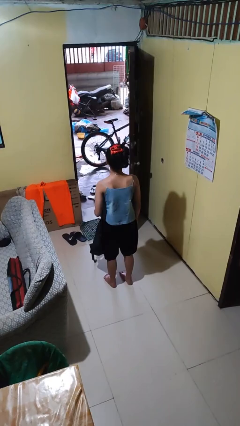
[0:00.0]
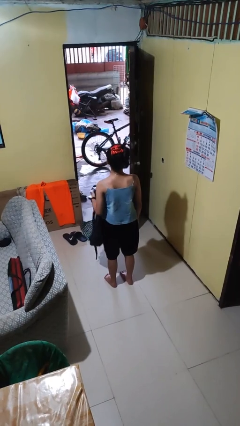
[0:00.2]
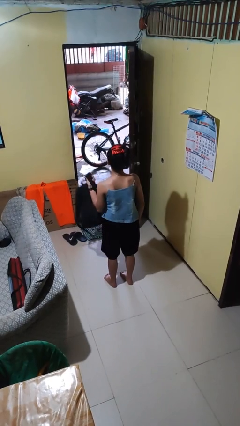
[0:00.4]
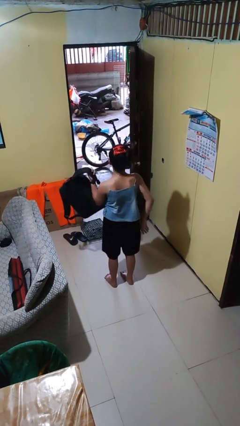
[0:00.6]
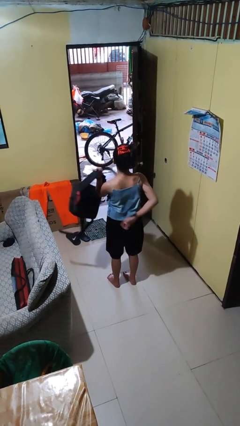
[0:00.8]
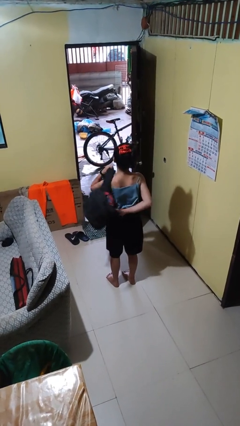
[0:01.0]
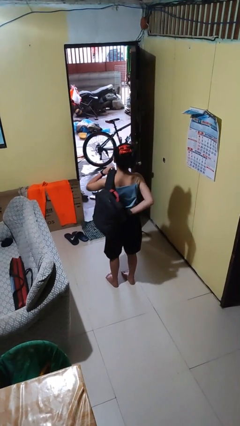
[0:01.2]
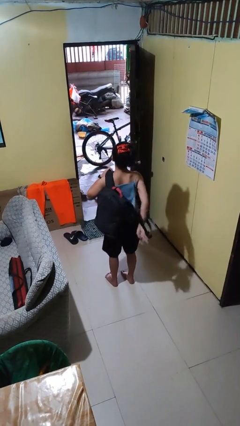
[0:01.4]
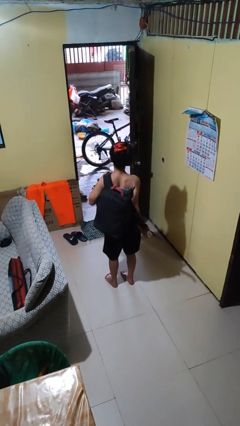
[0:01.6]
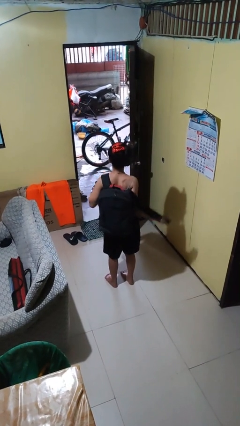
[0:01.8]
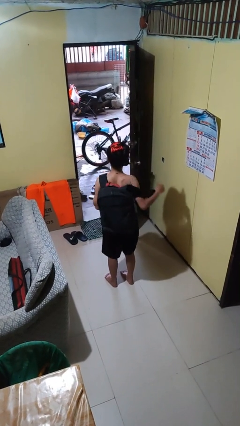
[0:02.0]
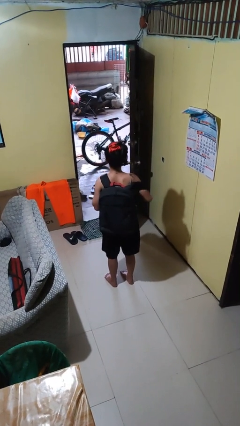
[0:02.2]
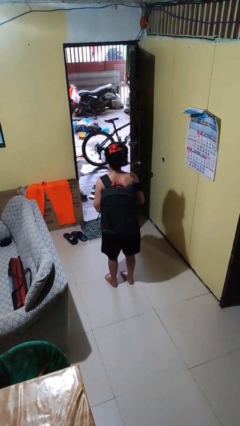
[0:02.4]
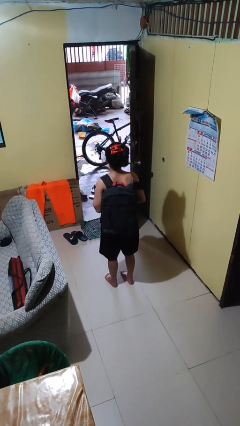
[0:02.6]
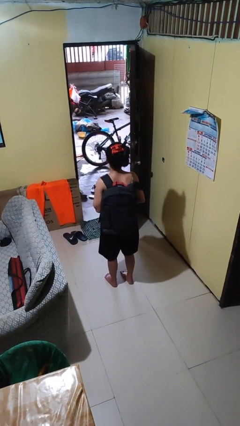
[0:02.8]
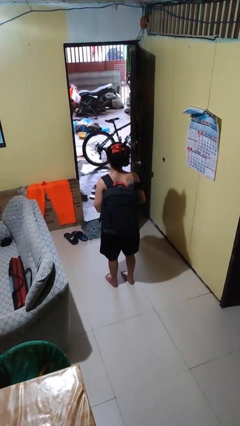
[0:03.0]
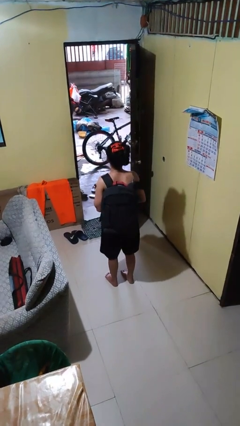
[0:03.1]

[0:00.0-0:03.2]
person puts on backpack

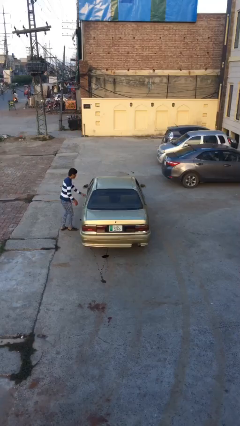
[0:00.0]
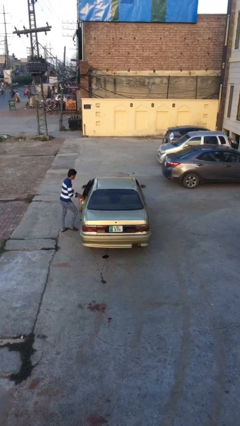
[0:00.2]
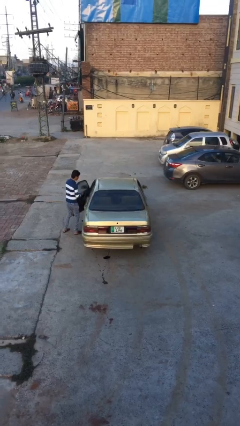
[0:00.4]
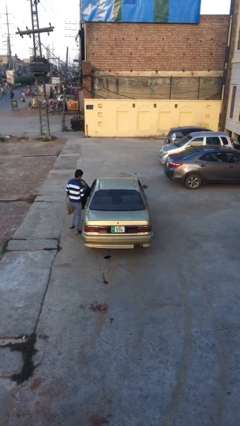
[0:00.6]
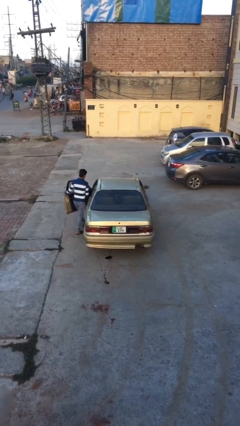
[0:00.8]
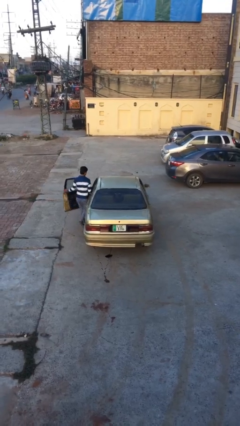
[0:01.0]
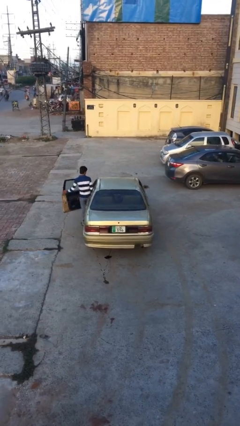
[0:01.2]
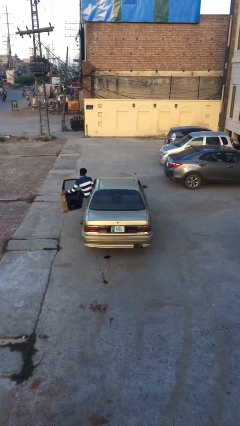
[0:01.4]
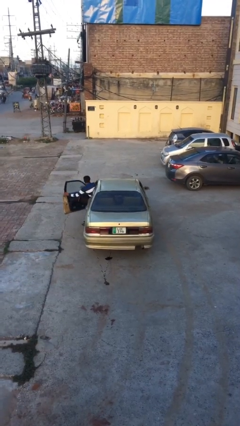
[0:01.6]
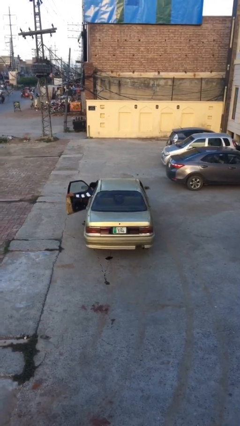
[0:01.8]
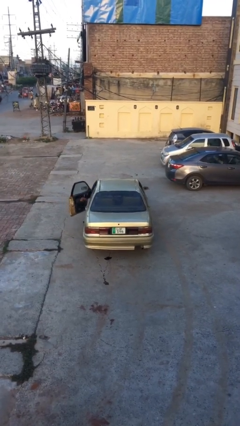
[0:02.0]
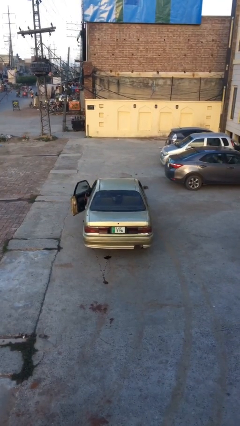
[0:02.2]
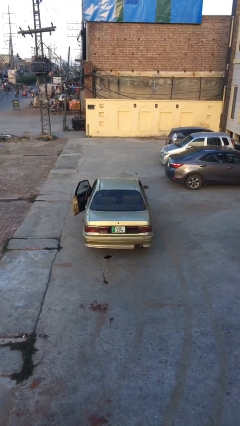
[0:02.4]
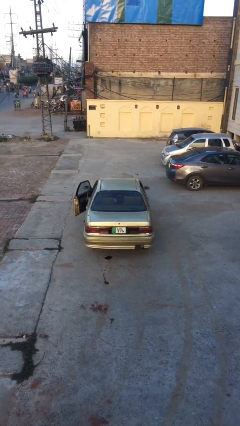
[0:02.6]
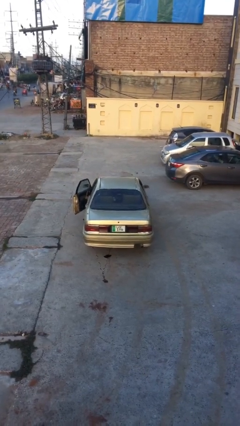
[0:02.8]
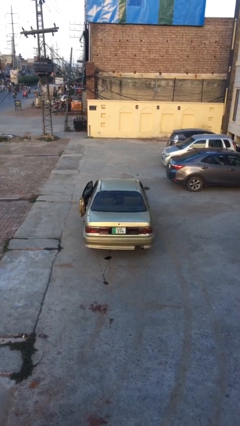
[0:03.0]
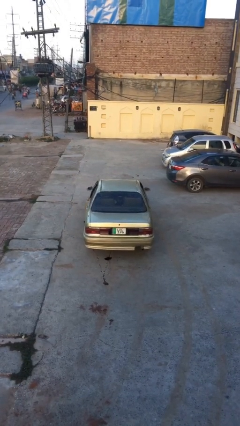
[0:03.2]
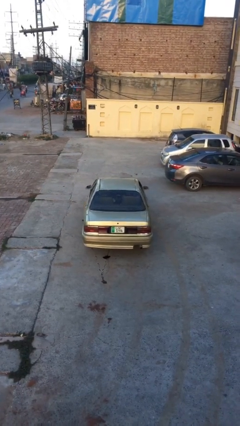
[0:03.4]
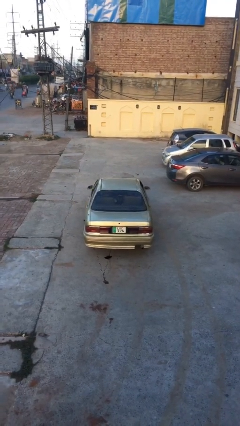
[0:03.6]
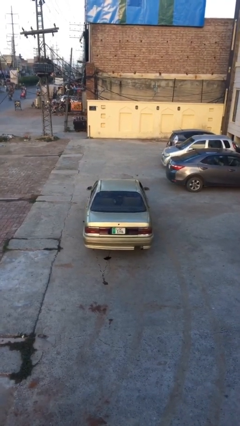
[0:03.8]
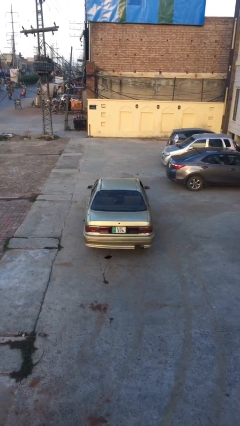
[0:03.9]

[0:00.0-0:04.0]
car picks up person

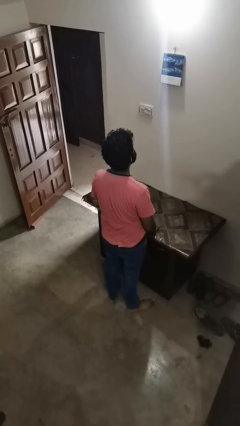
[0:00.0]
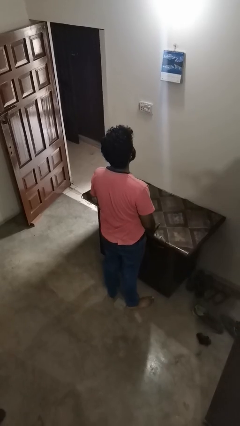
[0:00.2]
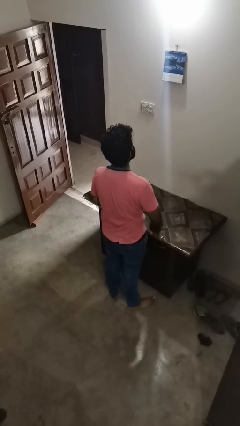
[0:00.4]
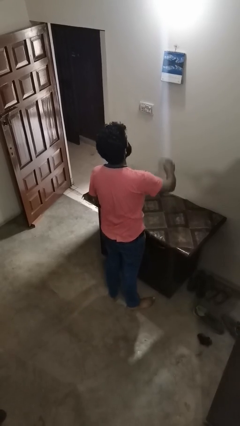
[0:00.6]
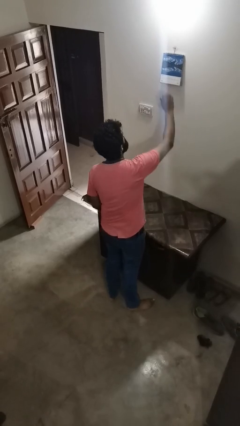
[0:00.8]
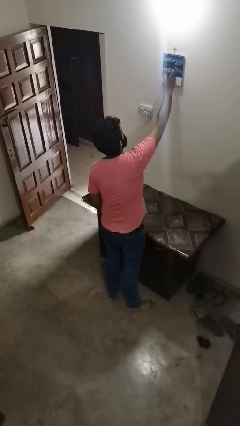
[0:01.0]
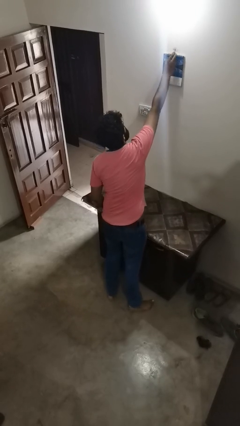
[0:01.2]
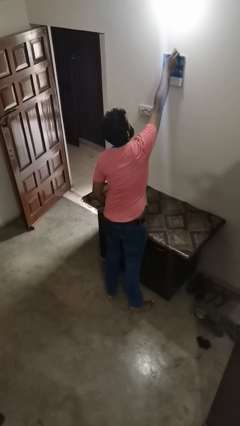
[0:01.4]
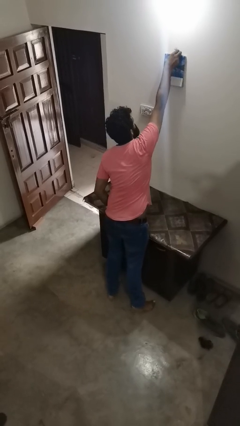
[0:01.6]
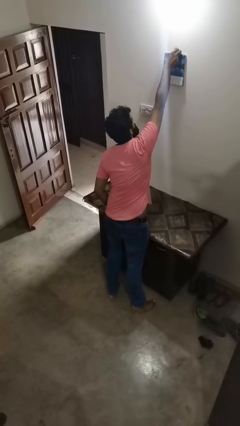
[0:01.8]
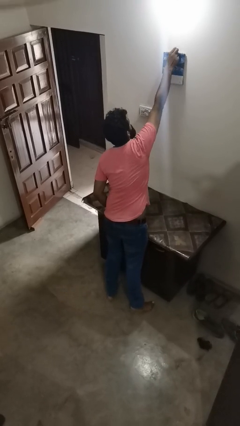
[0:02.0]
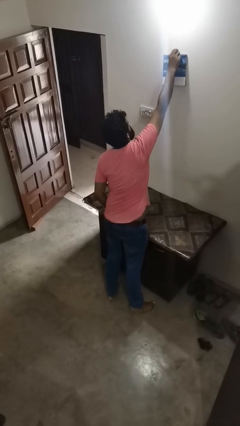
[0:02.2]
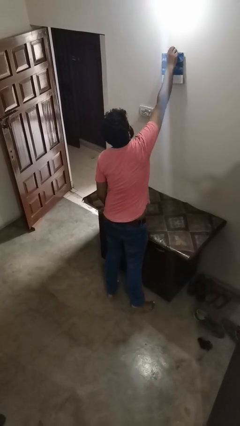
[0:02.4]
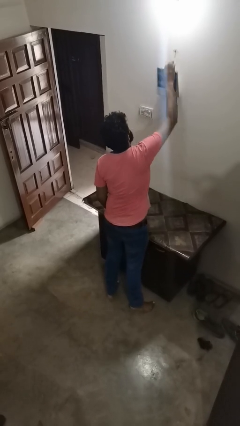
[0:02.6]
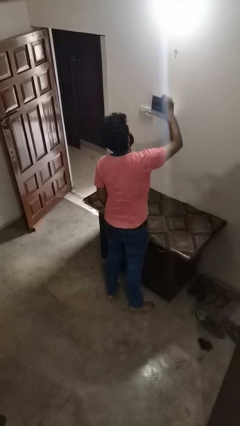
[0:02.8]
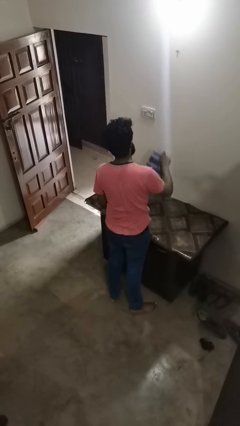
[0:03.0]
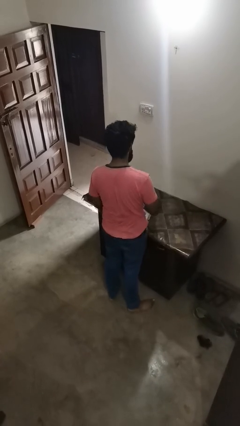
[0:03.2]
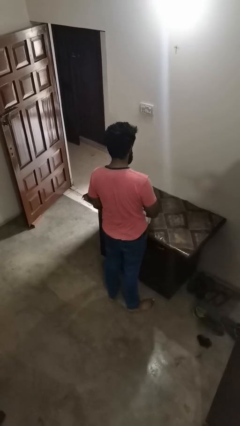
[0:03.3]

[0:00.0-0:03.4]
person takes down picture frame

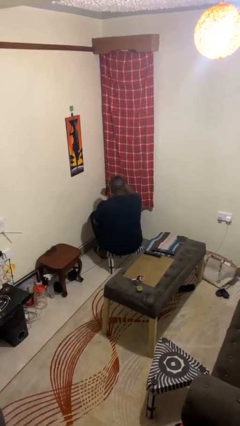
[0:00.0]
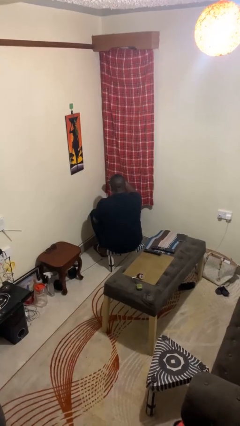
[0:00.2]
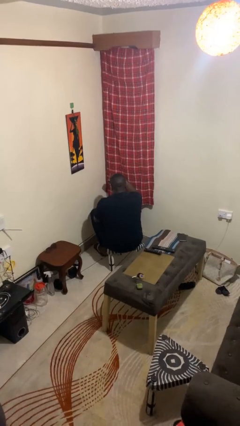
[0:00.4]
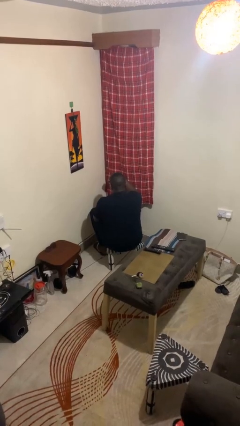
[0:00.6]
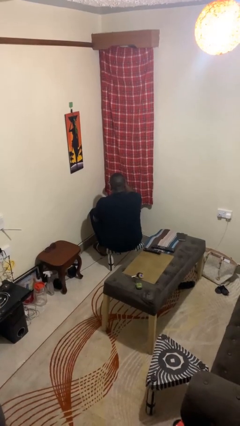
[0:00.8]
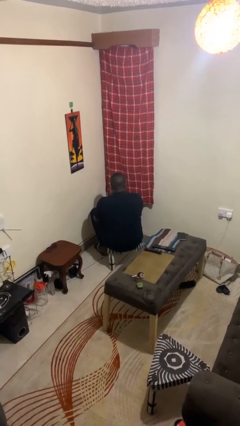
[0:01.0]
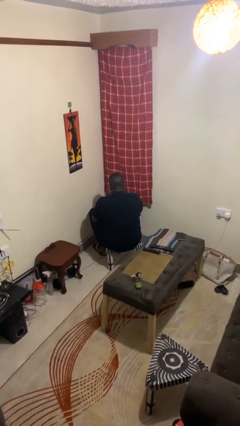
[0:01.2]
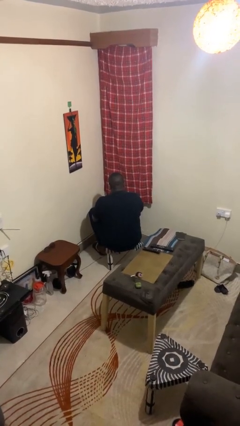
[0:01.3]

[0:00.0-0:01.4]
person gestures swipe down

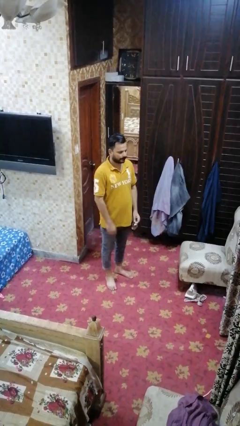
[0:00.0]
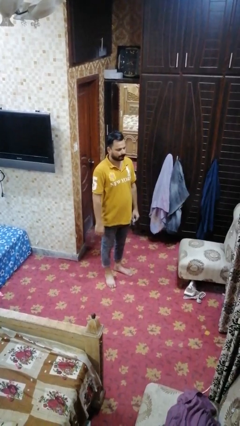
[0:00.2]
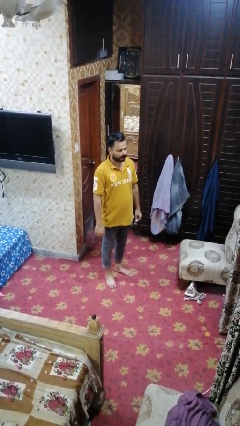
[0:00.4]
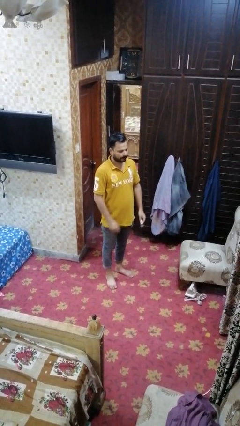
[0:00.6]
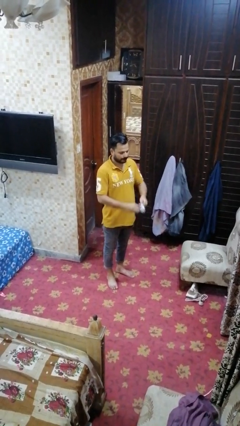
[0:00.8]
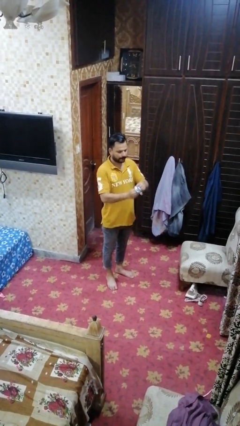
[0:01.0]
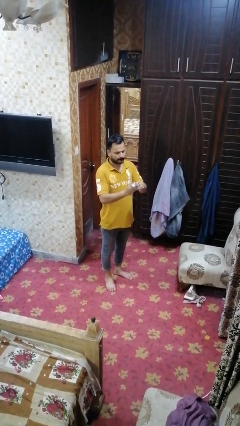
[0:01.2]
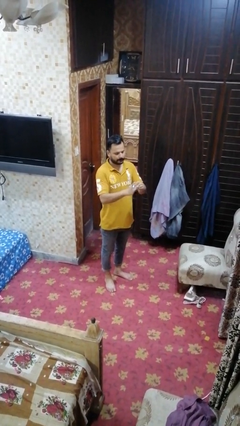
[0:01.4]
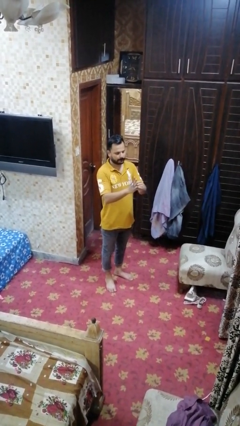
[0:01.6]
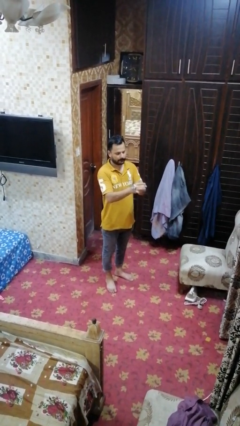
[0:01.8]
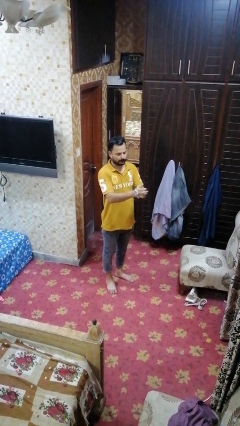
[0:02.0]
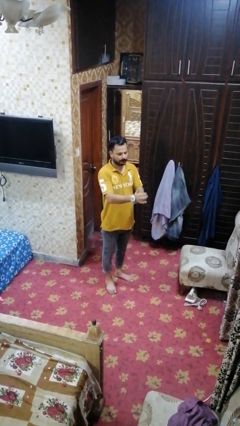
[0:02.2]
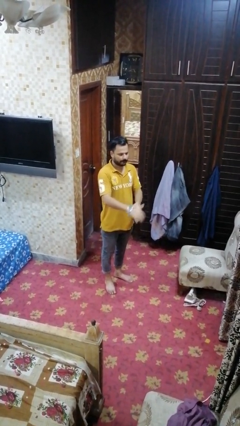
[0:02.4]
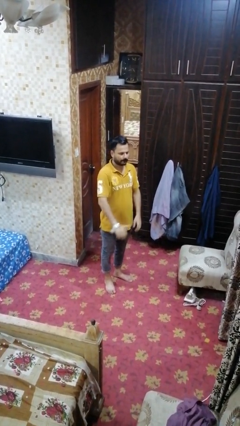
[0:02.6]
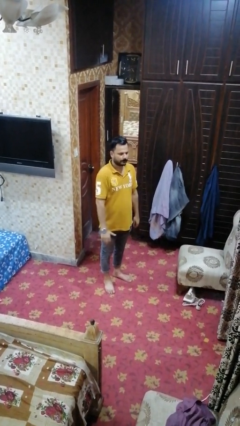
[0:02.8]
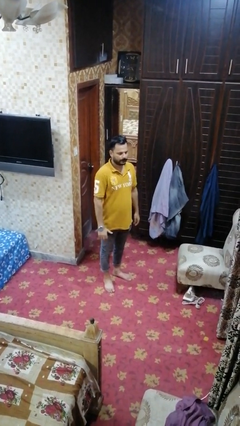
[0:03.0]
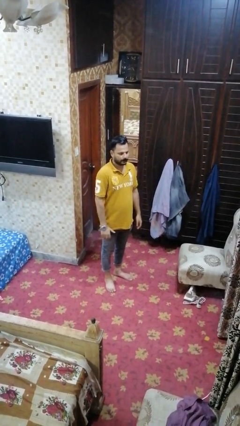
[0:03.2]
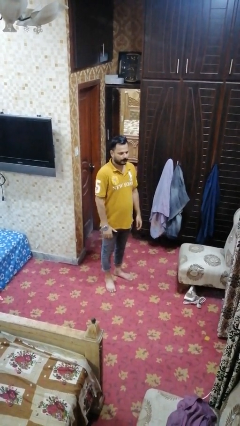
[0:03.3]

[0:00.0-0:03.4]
person puts on wristwatch

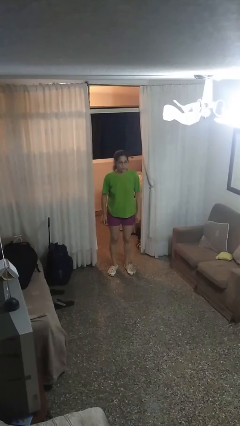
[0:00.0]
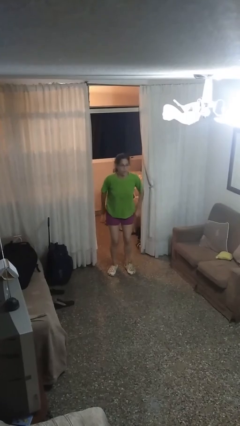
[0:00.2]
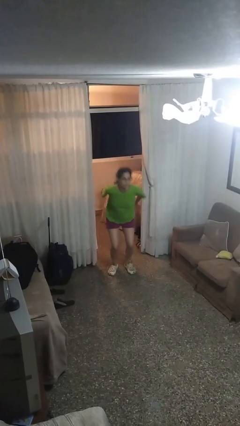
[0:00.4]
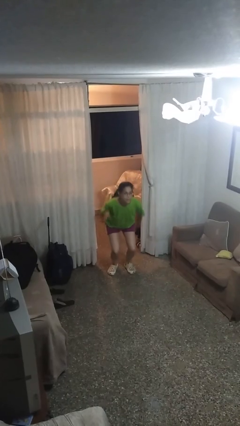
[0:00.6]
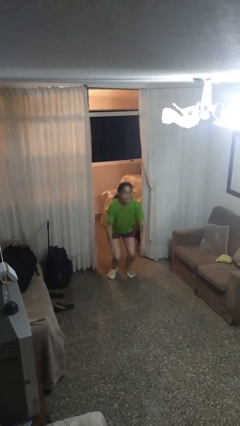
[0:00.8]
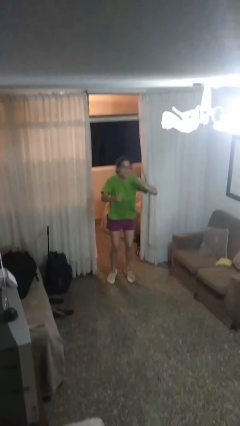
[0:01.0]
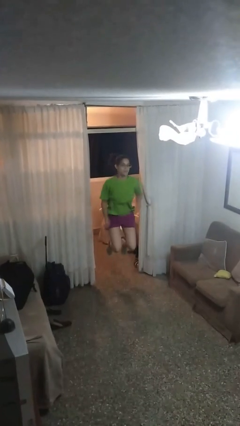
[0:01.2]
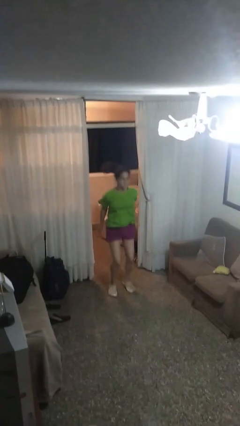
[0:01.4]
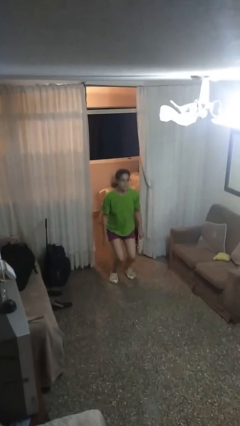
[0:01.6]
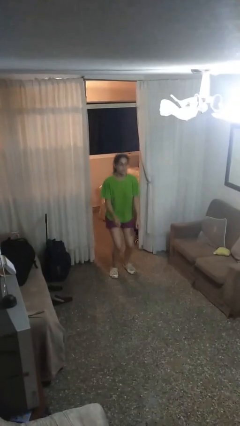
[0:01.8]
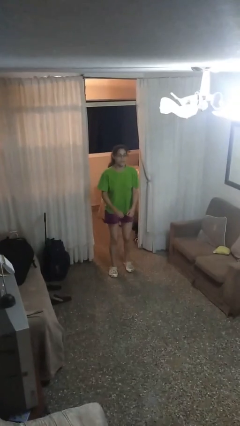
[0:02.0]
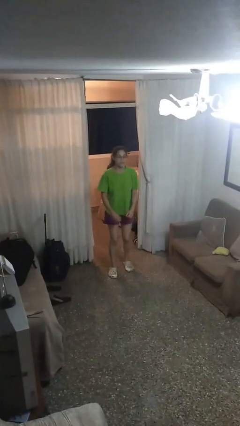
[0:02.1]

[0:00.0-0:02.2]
person jumps
